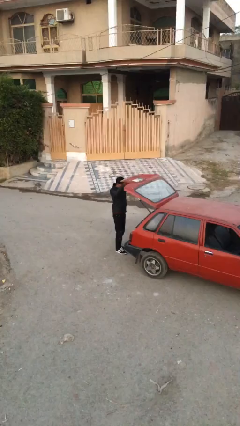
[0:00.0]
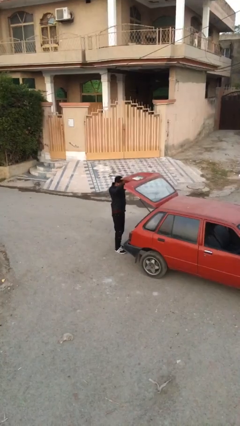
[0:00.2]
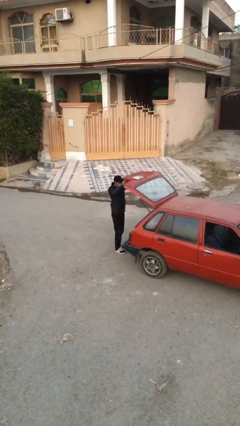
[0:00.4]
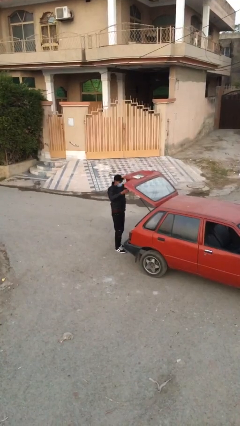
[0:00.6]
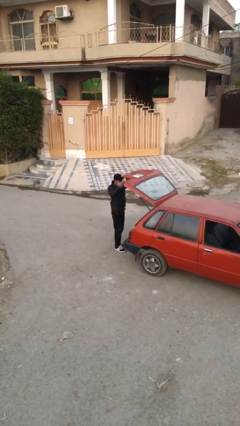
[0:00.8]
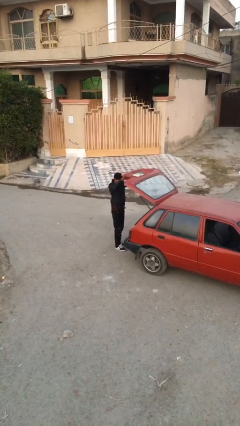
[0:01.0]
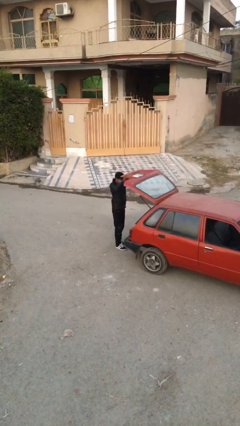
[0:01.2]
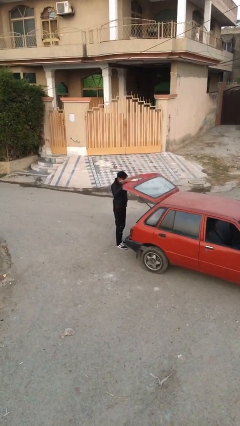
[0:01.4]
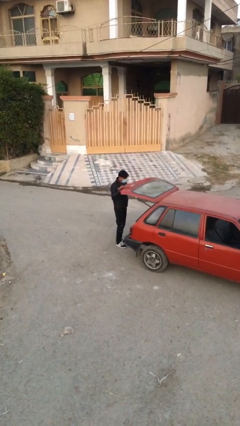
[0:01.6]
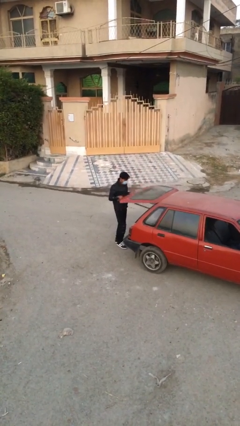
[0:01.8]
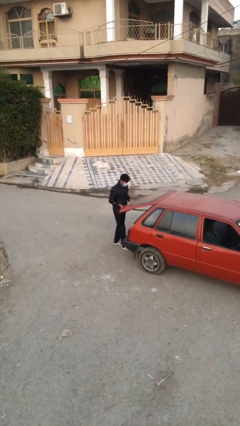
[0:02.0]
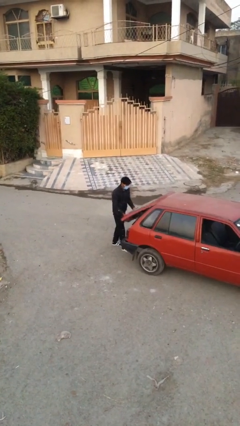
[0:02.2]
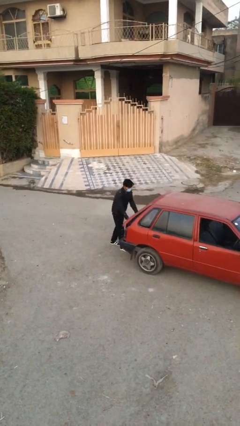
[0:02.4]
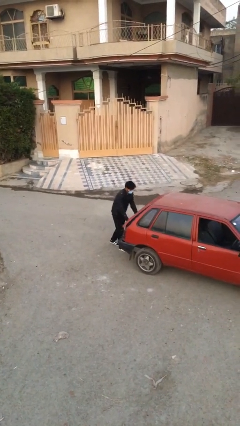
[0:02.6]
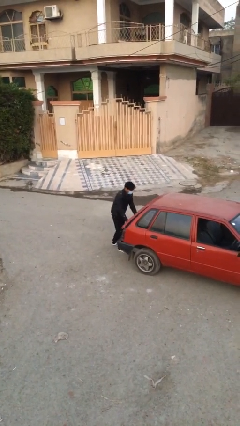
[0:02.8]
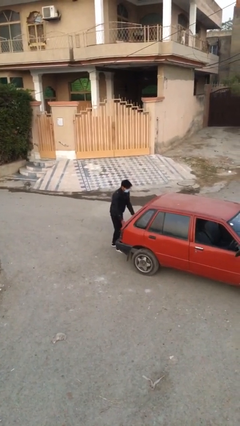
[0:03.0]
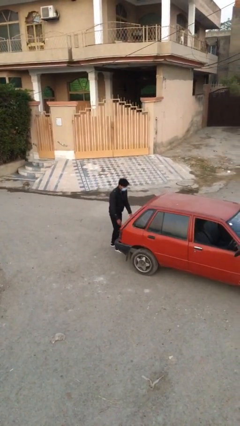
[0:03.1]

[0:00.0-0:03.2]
person closes car trunk

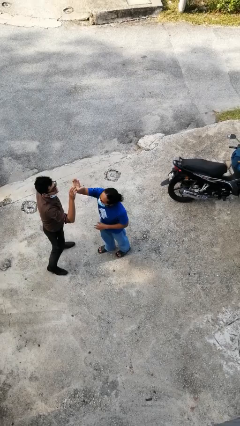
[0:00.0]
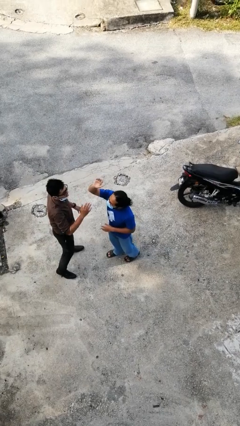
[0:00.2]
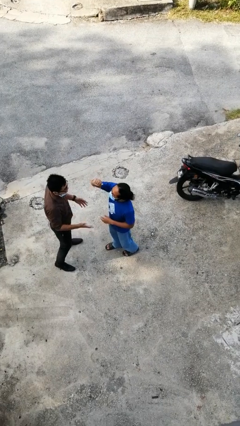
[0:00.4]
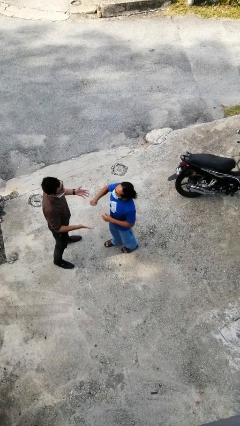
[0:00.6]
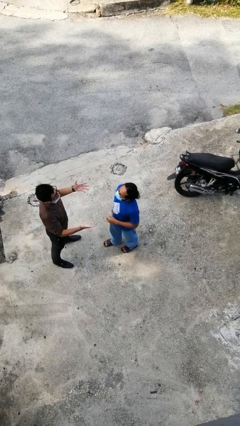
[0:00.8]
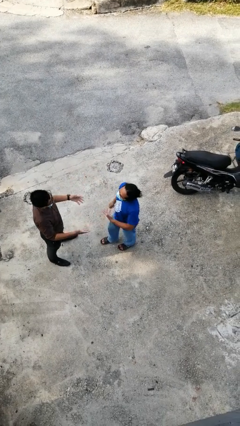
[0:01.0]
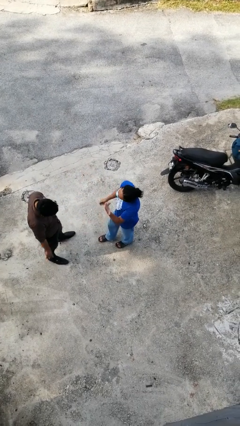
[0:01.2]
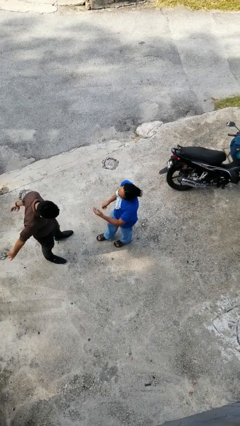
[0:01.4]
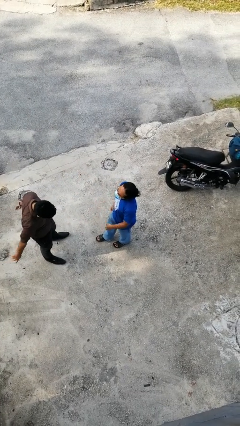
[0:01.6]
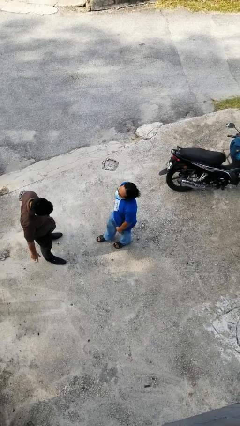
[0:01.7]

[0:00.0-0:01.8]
person highfives hand

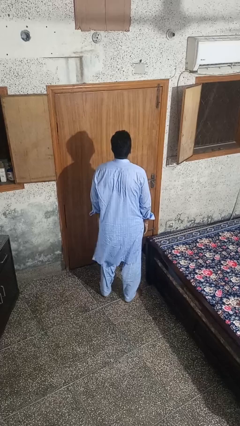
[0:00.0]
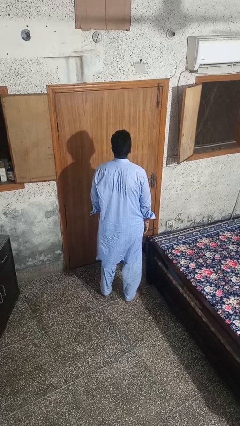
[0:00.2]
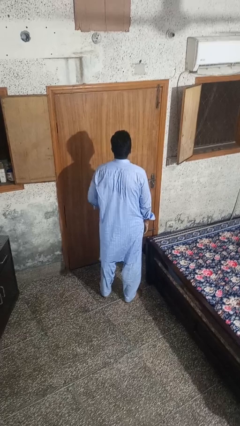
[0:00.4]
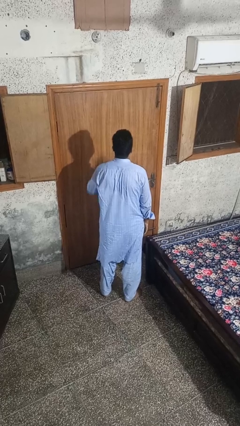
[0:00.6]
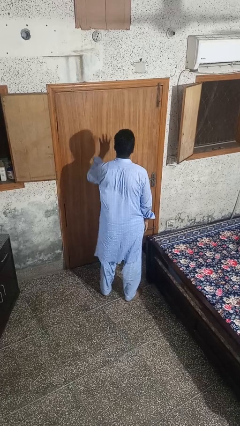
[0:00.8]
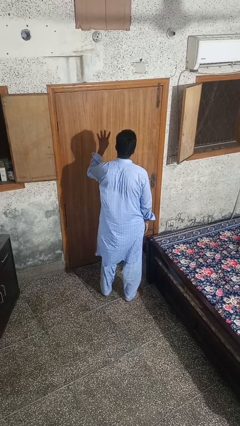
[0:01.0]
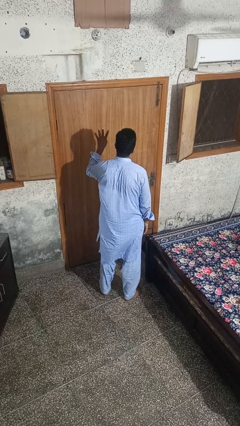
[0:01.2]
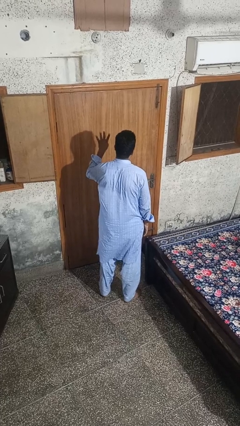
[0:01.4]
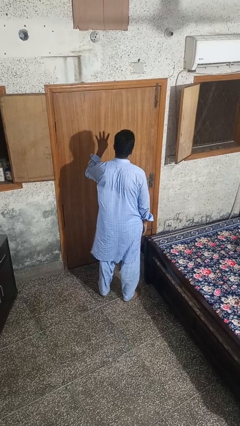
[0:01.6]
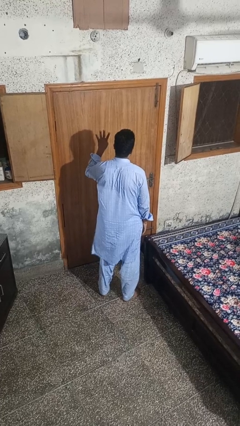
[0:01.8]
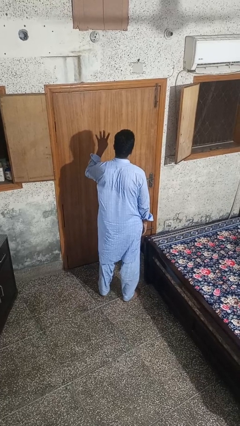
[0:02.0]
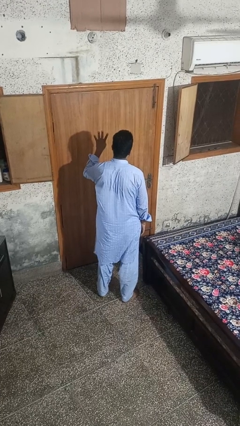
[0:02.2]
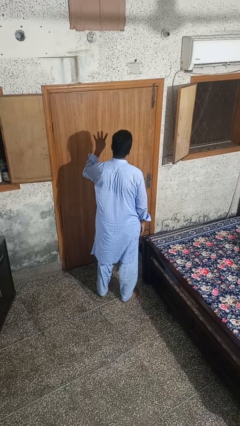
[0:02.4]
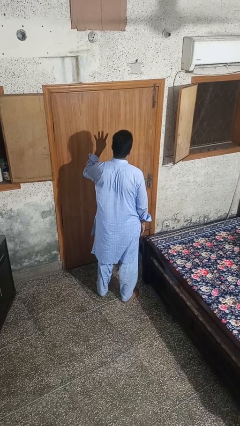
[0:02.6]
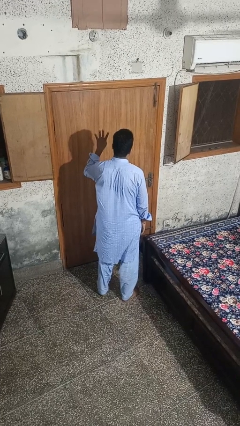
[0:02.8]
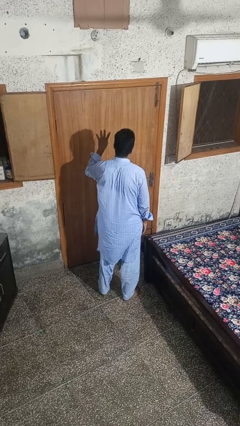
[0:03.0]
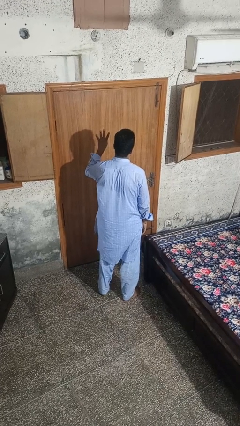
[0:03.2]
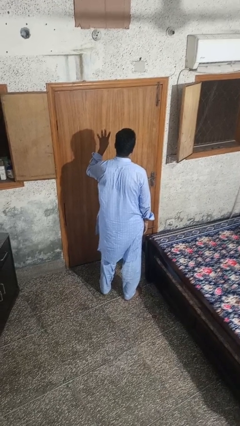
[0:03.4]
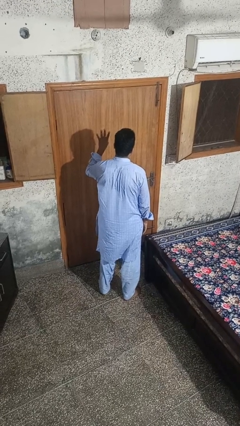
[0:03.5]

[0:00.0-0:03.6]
person gestures number four

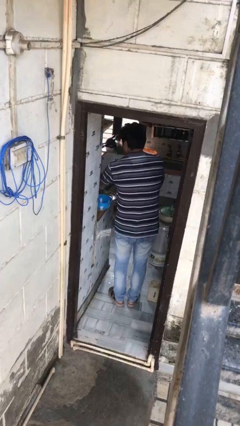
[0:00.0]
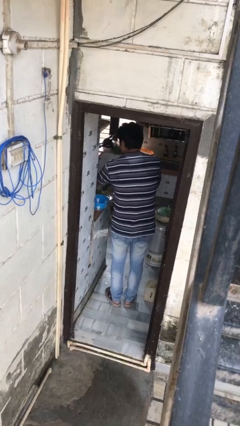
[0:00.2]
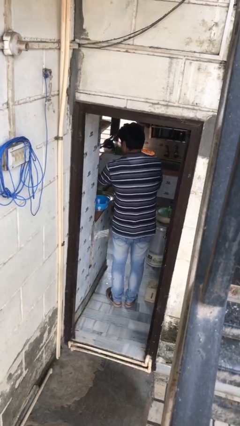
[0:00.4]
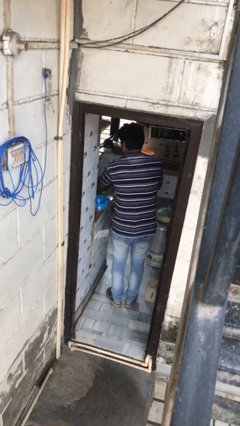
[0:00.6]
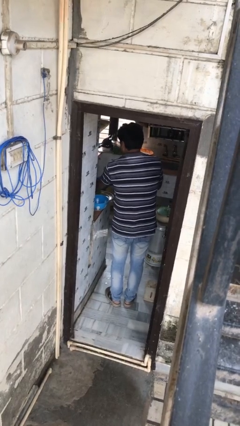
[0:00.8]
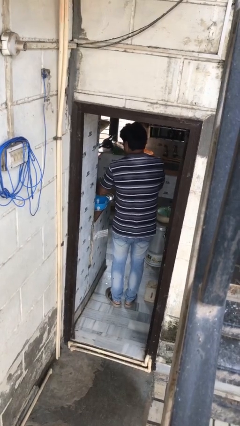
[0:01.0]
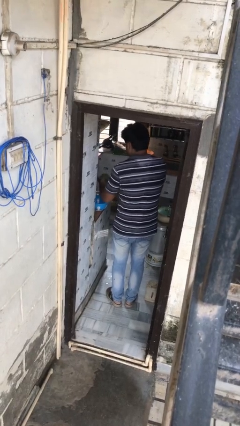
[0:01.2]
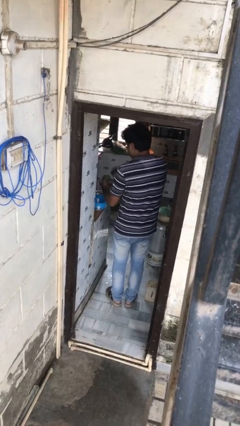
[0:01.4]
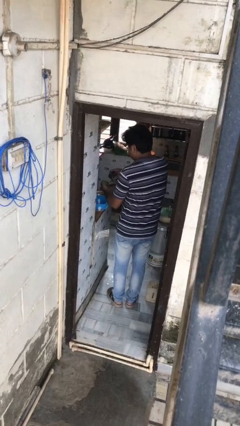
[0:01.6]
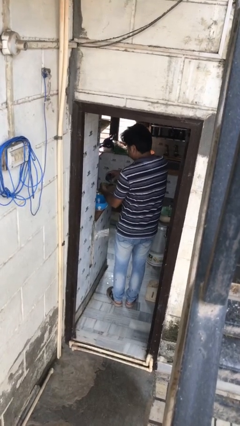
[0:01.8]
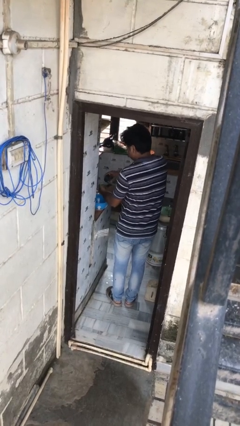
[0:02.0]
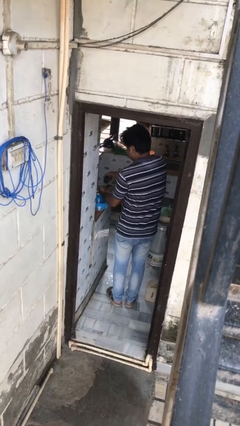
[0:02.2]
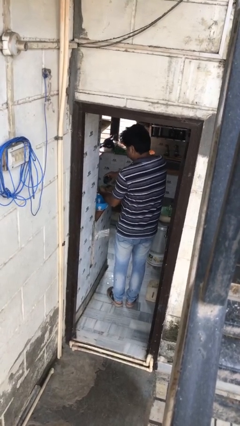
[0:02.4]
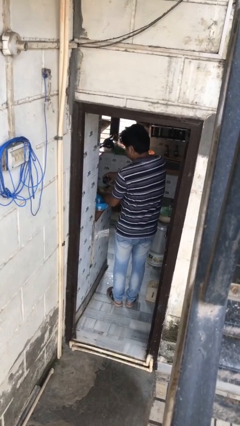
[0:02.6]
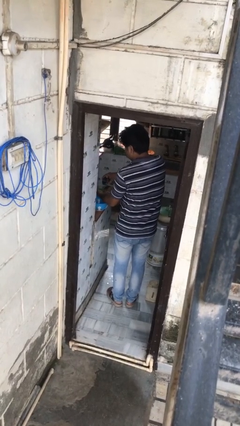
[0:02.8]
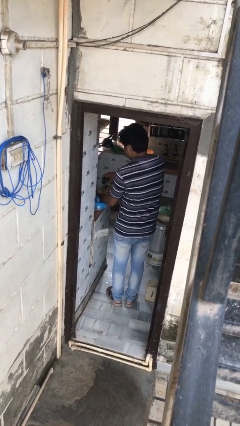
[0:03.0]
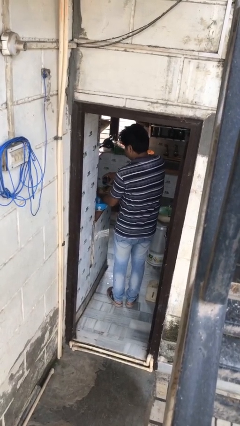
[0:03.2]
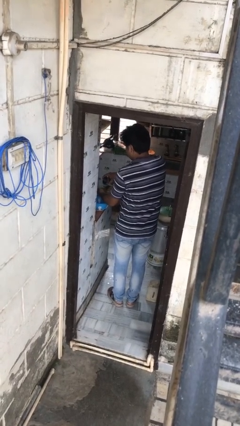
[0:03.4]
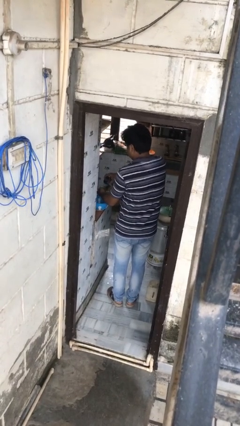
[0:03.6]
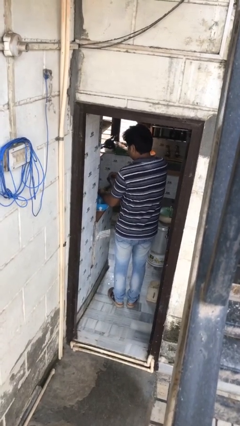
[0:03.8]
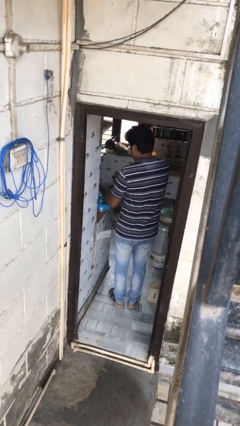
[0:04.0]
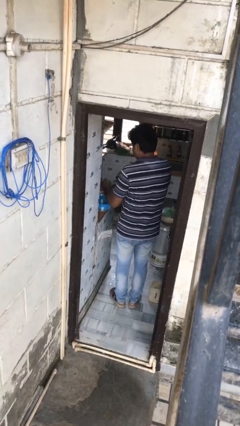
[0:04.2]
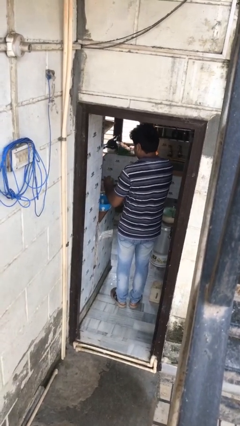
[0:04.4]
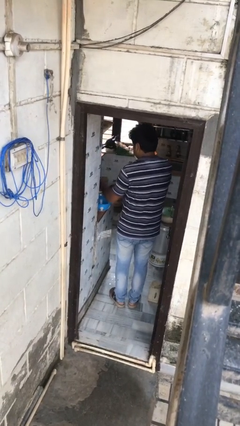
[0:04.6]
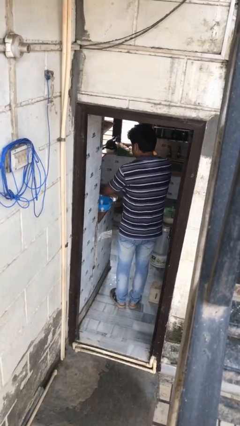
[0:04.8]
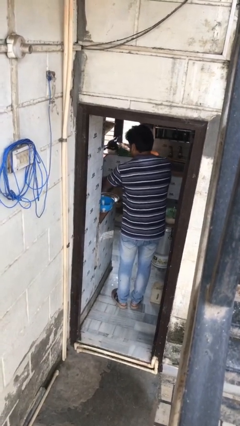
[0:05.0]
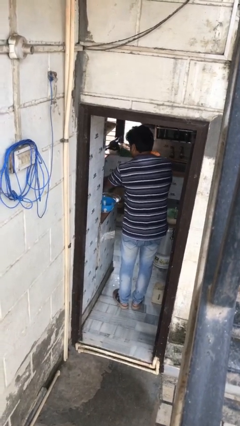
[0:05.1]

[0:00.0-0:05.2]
person washes dish

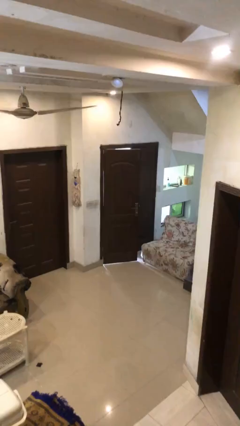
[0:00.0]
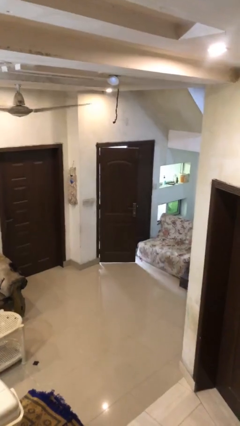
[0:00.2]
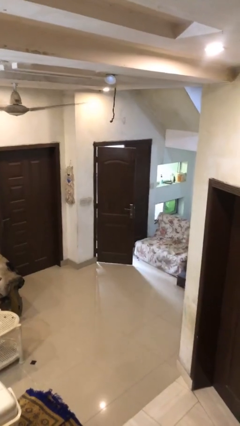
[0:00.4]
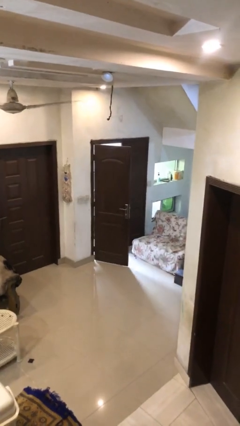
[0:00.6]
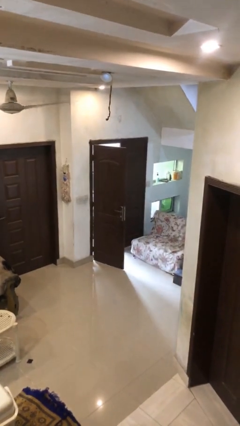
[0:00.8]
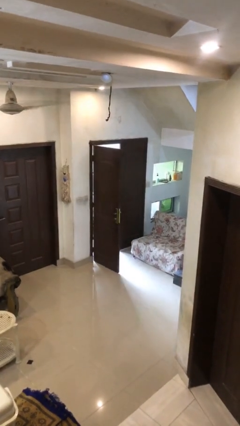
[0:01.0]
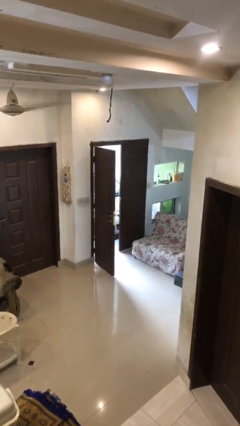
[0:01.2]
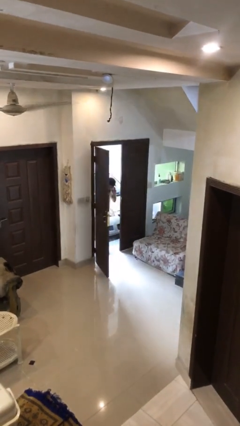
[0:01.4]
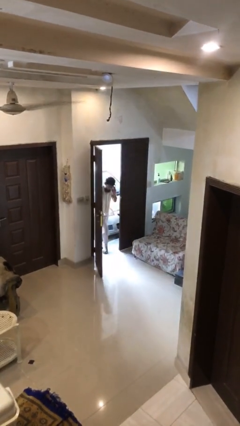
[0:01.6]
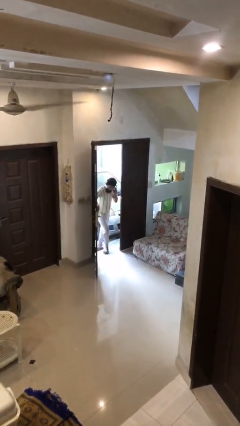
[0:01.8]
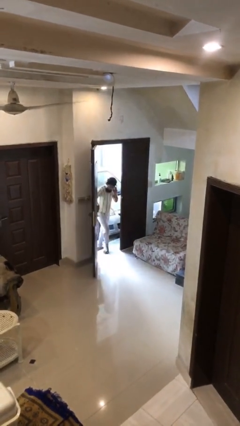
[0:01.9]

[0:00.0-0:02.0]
person opens facility door

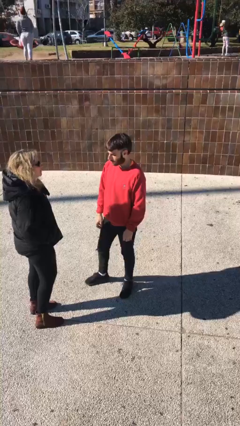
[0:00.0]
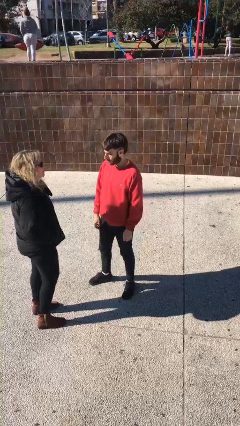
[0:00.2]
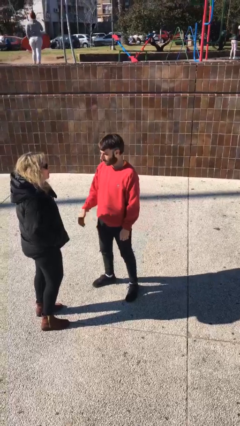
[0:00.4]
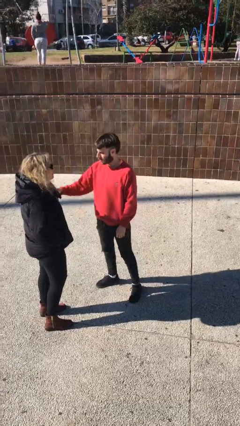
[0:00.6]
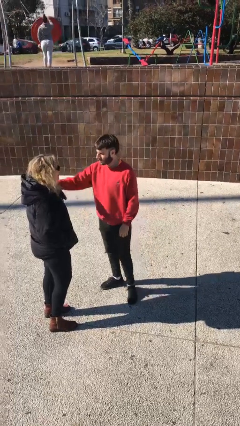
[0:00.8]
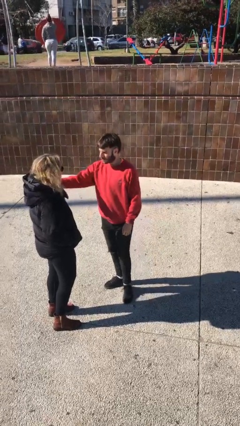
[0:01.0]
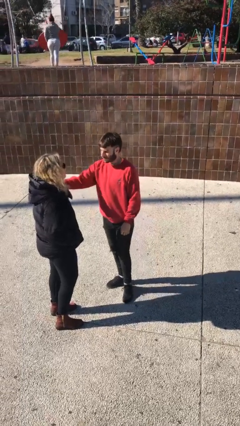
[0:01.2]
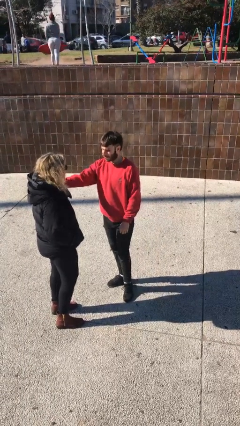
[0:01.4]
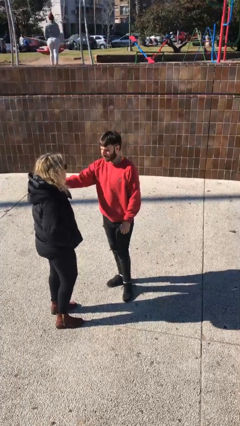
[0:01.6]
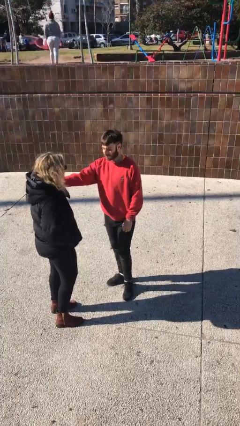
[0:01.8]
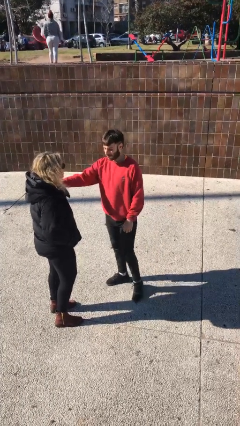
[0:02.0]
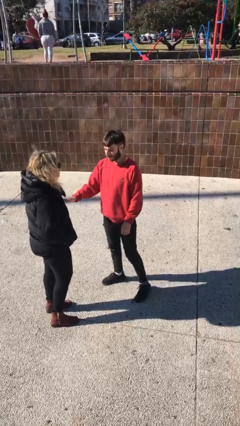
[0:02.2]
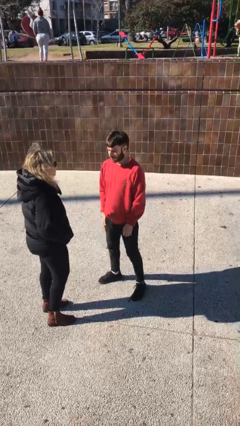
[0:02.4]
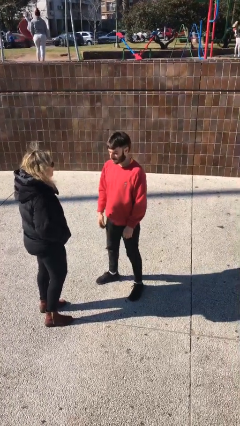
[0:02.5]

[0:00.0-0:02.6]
person pounds shoulders of person
